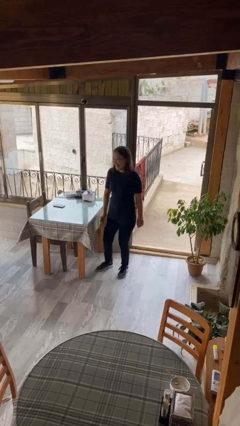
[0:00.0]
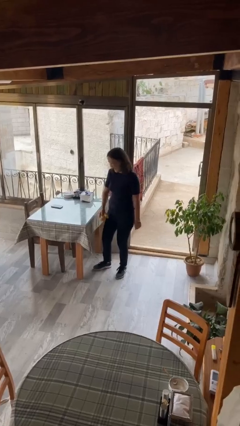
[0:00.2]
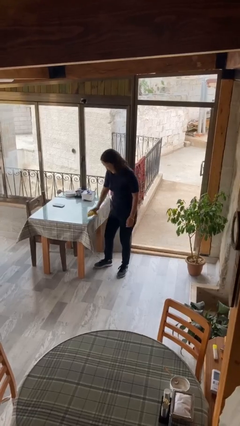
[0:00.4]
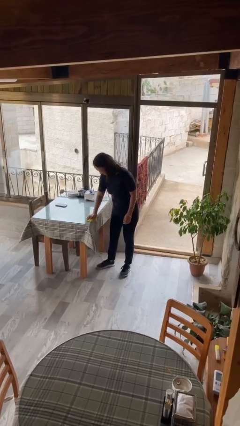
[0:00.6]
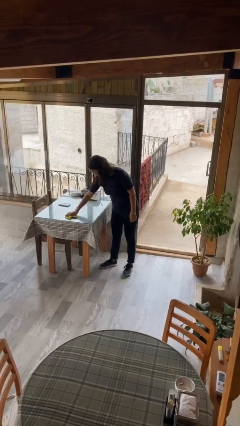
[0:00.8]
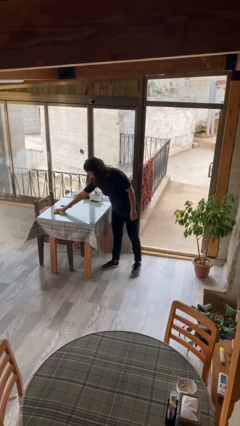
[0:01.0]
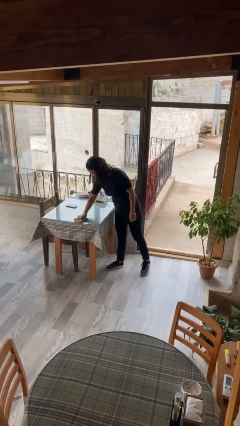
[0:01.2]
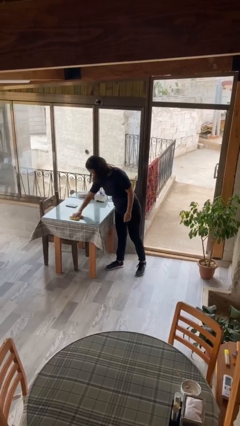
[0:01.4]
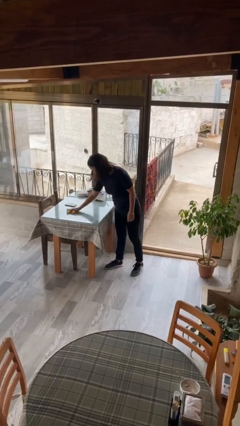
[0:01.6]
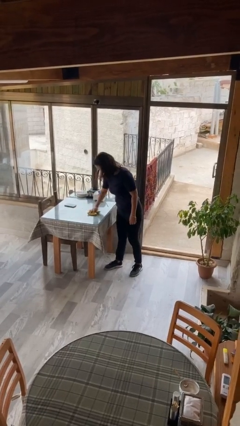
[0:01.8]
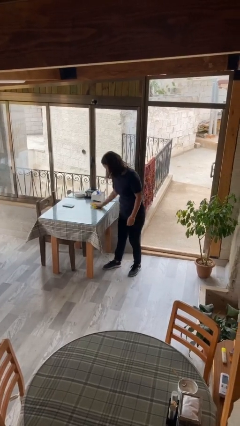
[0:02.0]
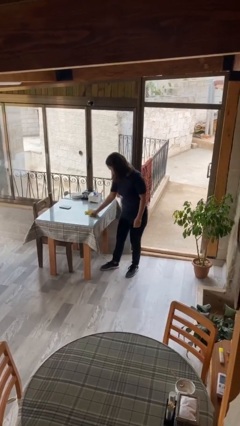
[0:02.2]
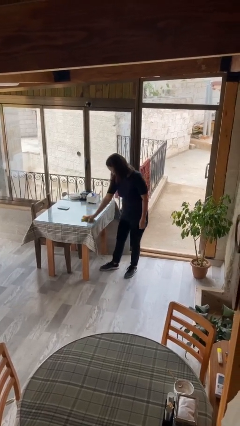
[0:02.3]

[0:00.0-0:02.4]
person cleans table with rag

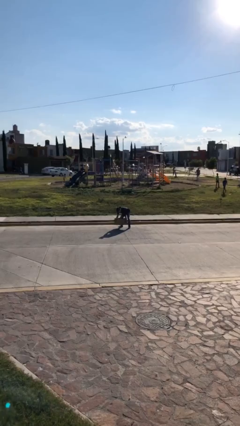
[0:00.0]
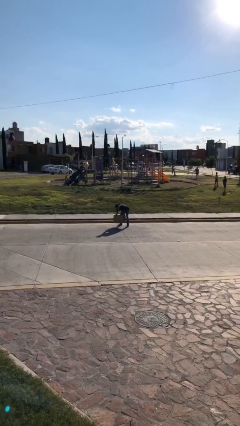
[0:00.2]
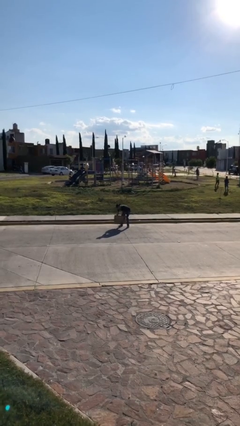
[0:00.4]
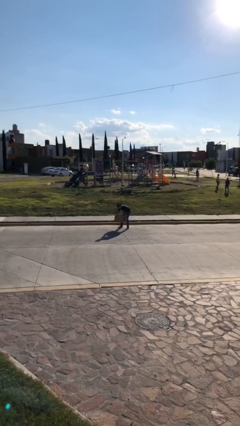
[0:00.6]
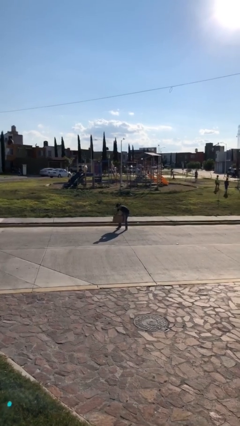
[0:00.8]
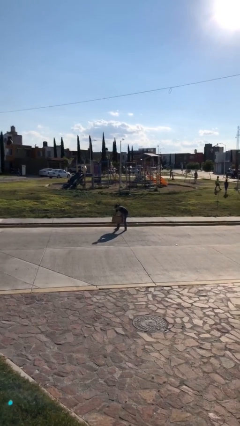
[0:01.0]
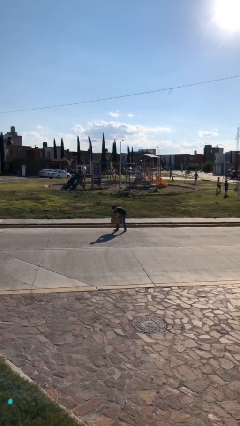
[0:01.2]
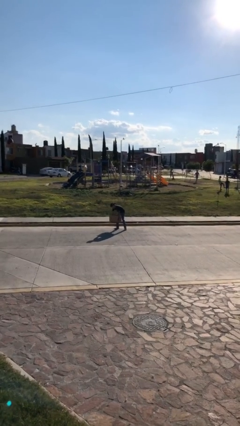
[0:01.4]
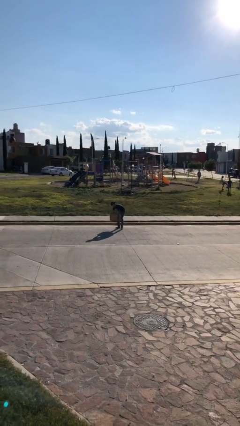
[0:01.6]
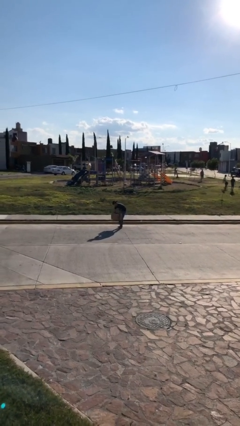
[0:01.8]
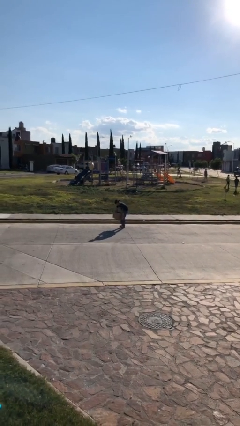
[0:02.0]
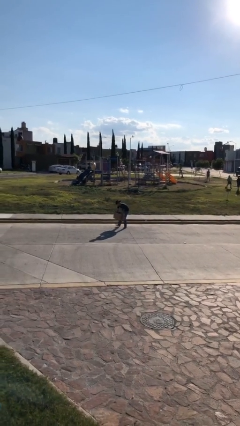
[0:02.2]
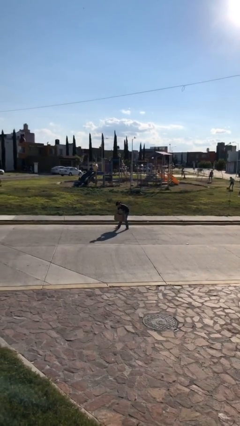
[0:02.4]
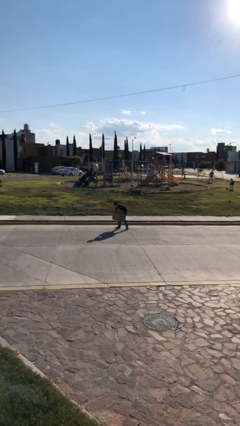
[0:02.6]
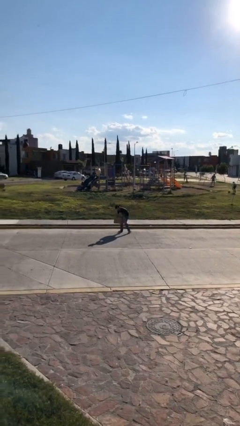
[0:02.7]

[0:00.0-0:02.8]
person carries heavy object

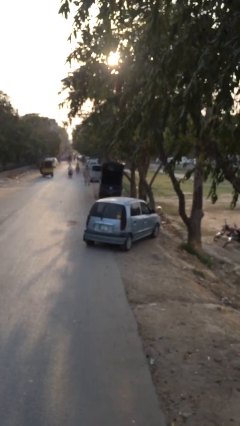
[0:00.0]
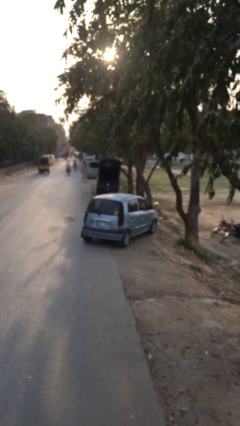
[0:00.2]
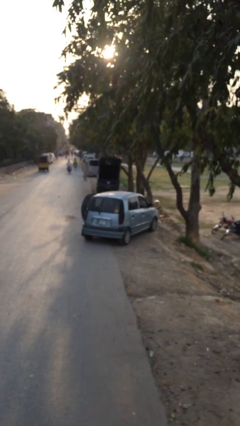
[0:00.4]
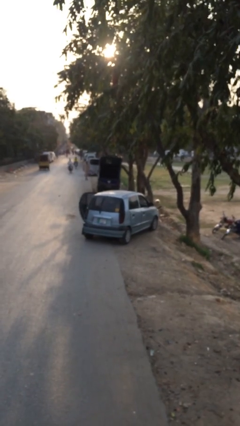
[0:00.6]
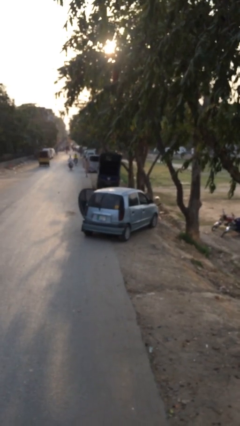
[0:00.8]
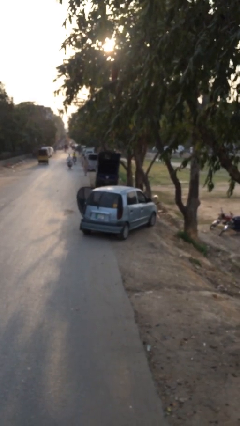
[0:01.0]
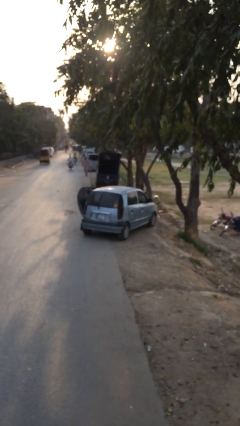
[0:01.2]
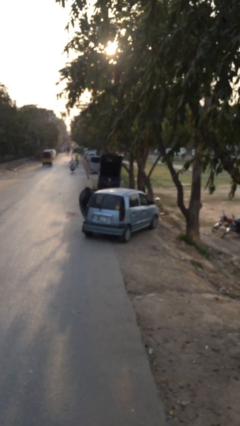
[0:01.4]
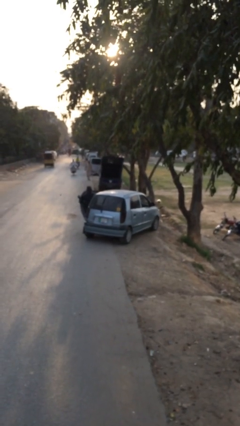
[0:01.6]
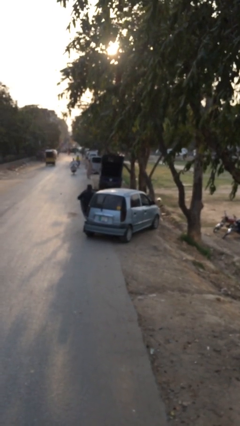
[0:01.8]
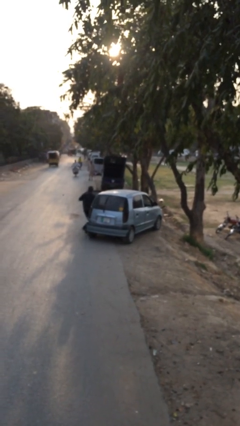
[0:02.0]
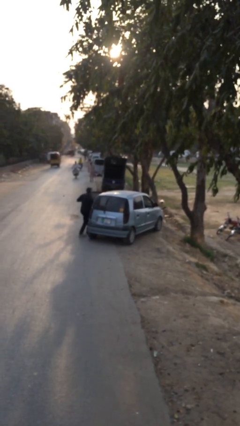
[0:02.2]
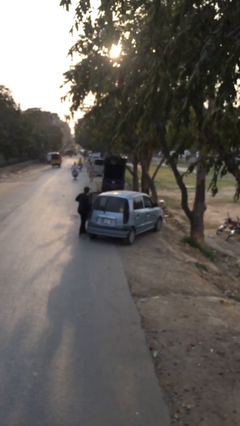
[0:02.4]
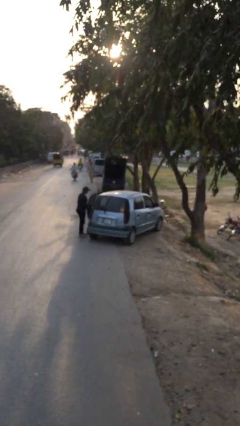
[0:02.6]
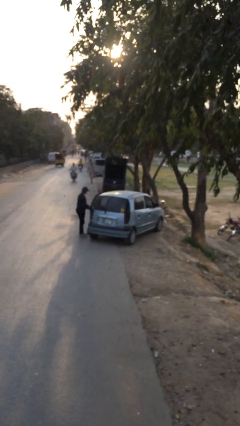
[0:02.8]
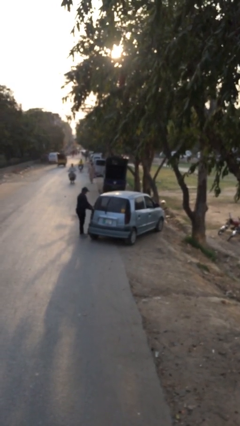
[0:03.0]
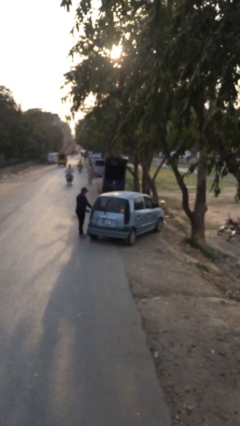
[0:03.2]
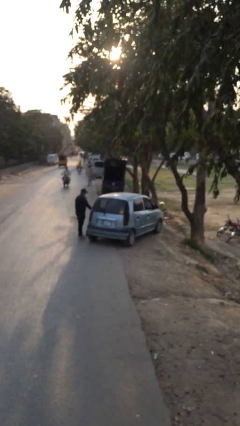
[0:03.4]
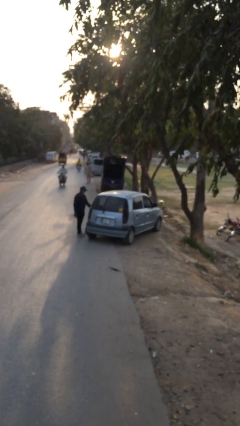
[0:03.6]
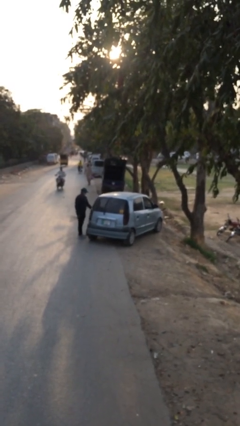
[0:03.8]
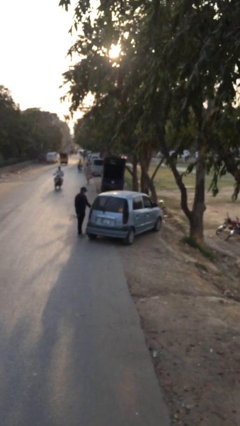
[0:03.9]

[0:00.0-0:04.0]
car drops off person

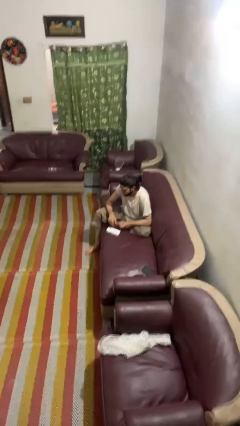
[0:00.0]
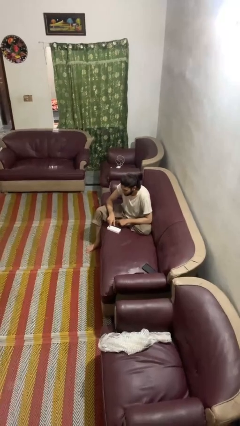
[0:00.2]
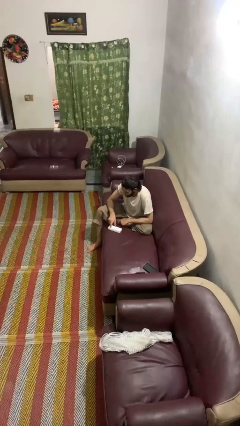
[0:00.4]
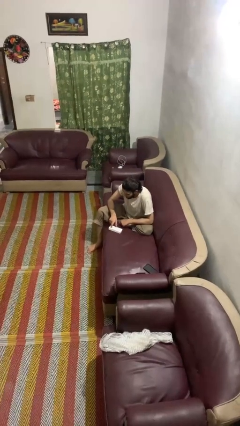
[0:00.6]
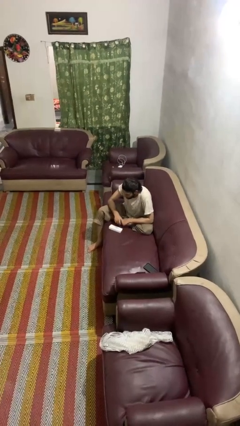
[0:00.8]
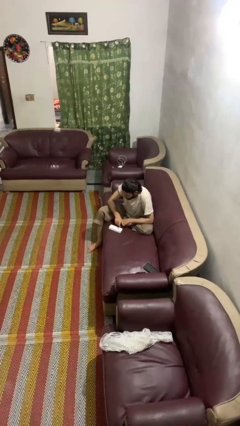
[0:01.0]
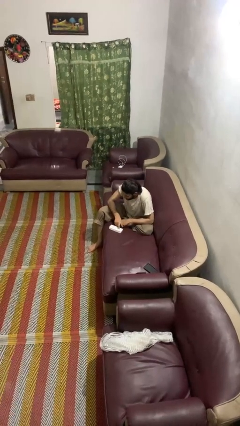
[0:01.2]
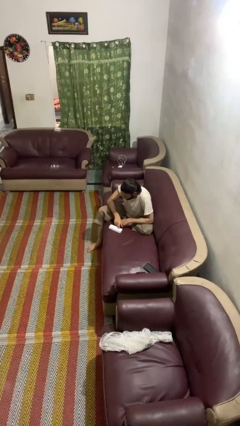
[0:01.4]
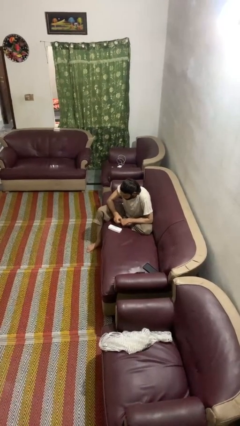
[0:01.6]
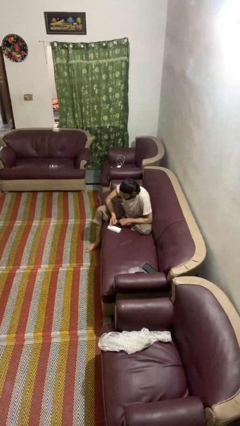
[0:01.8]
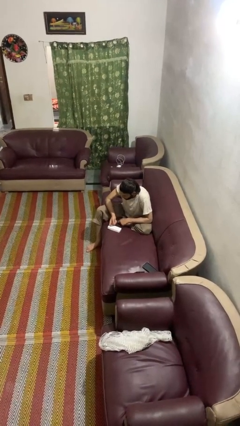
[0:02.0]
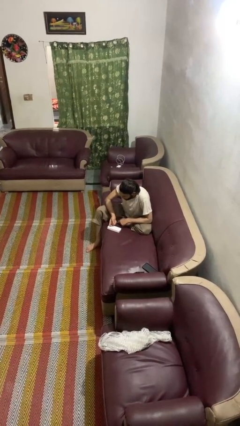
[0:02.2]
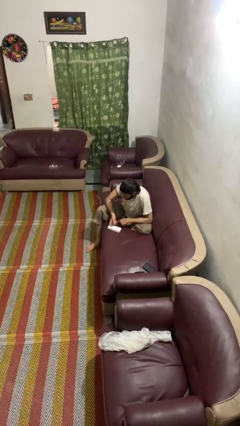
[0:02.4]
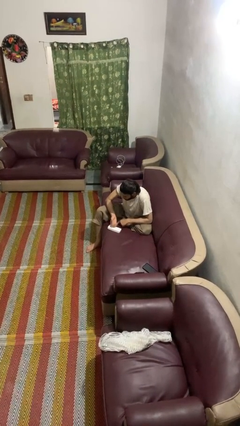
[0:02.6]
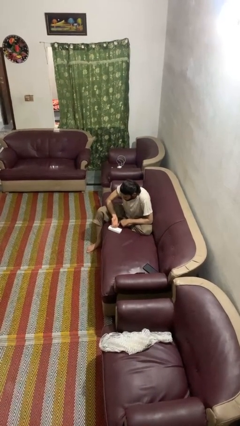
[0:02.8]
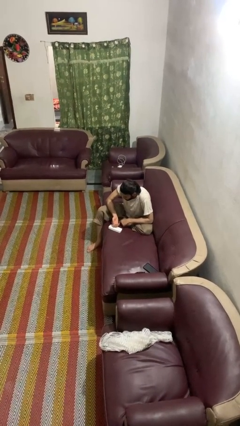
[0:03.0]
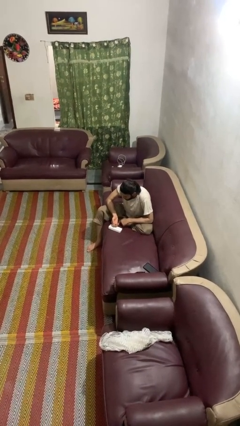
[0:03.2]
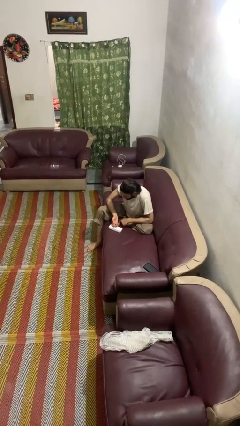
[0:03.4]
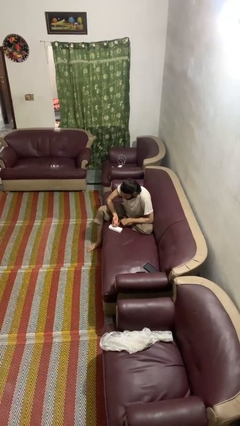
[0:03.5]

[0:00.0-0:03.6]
person taps object with finger

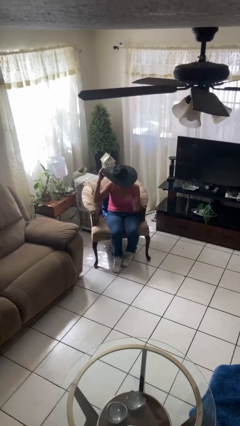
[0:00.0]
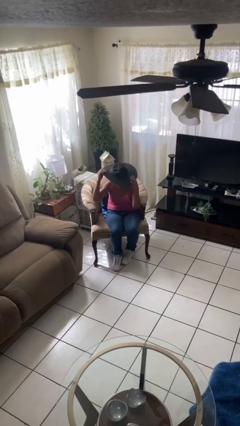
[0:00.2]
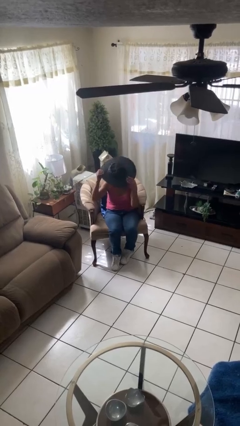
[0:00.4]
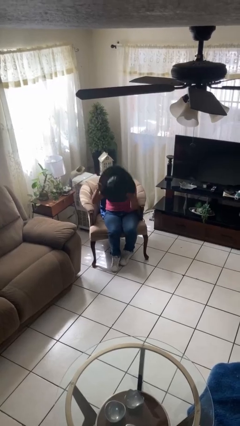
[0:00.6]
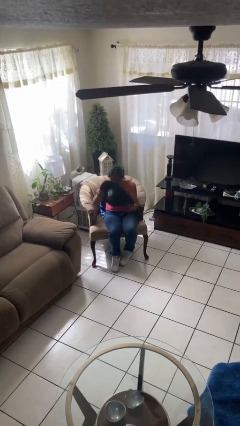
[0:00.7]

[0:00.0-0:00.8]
person takes off hat

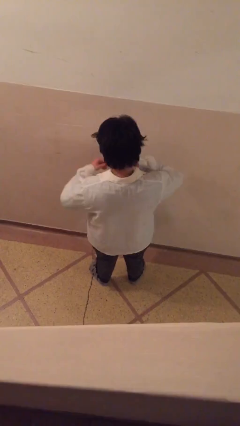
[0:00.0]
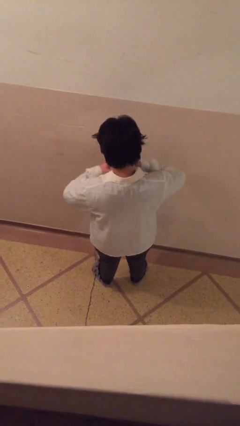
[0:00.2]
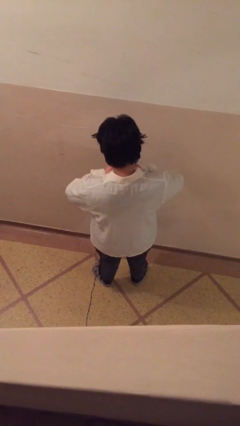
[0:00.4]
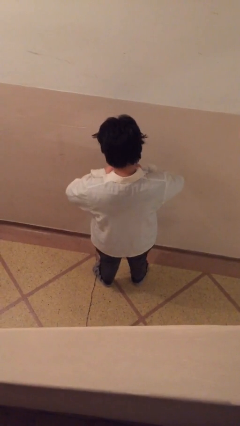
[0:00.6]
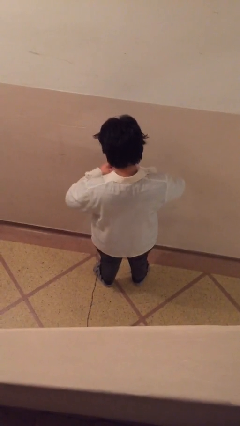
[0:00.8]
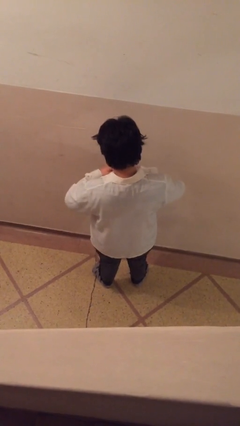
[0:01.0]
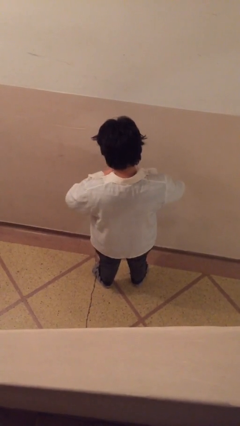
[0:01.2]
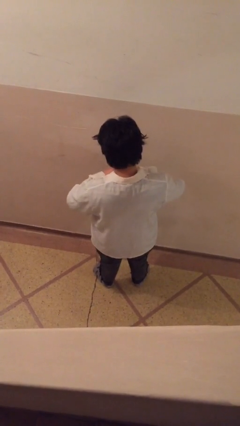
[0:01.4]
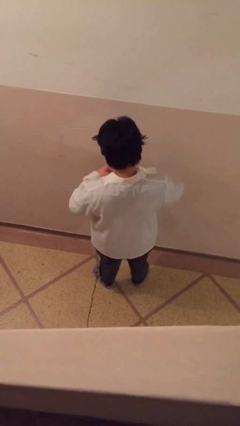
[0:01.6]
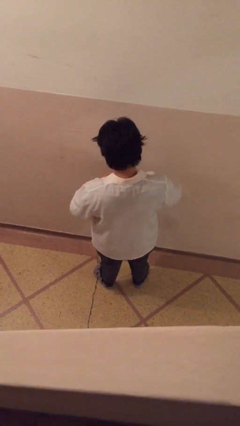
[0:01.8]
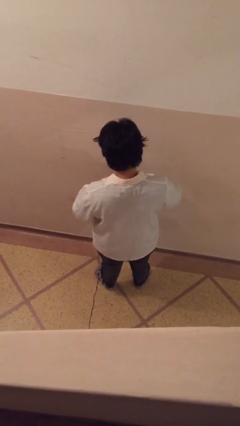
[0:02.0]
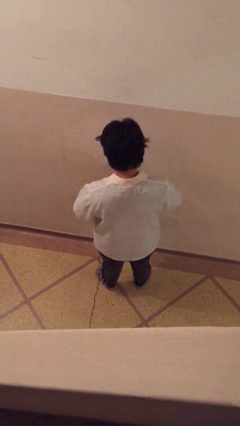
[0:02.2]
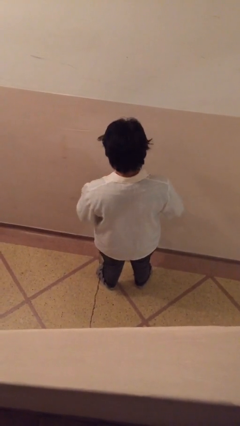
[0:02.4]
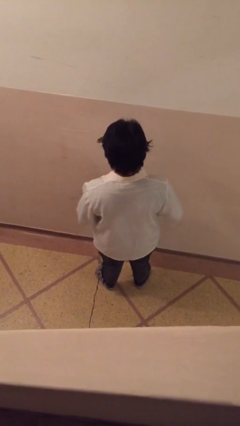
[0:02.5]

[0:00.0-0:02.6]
person unbuttons shirt

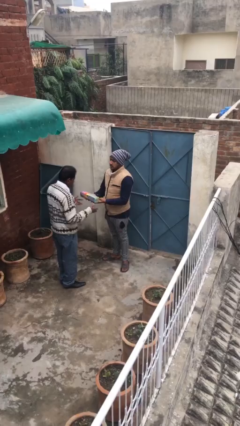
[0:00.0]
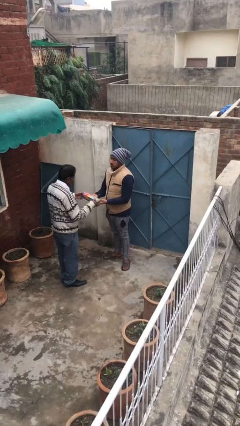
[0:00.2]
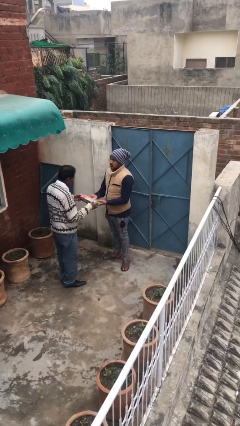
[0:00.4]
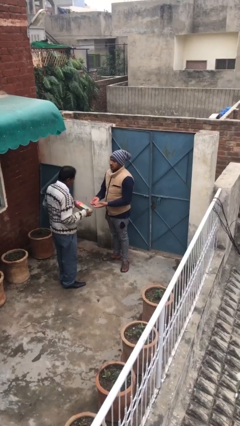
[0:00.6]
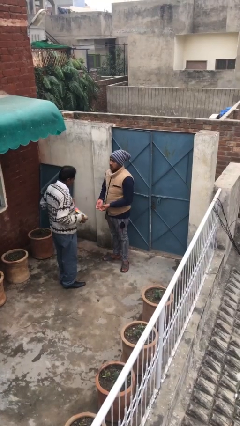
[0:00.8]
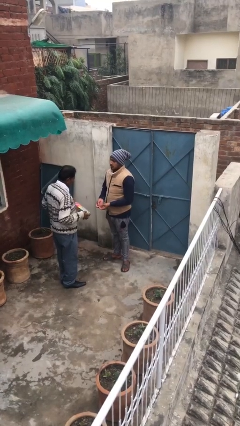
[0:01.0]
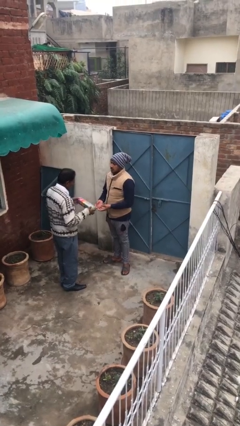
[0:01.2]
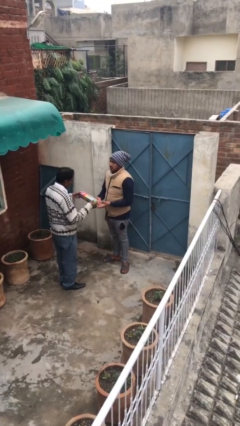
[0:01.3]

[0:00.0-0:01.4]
person transfers object to person
